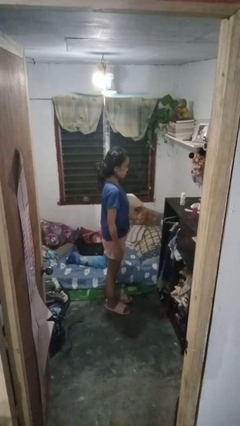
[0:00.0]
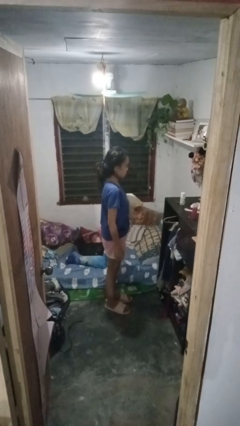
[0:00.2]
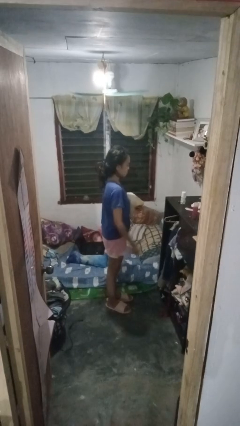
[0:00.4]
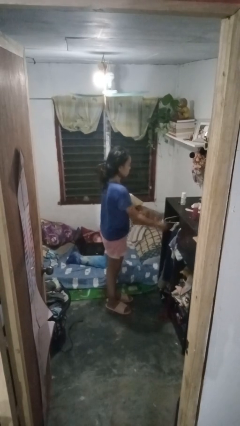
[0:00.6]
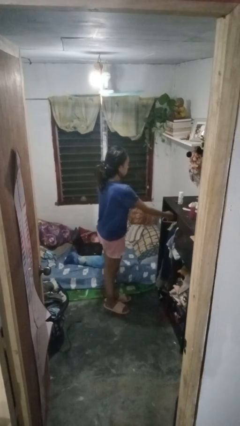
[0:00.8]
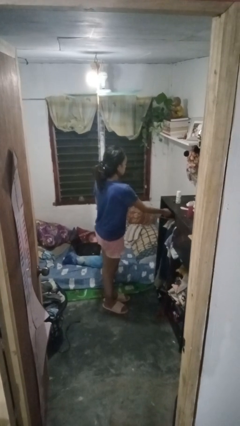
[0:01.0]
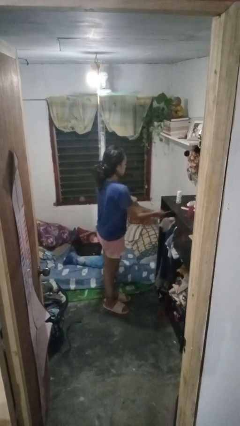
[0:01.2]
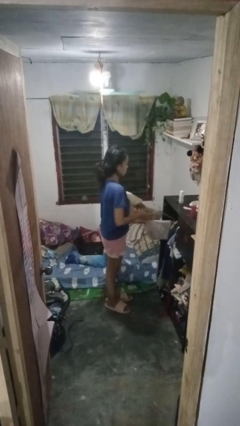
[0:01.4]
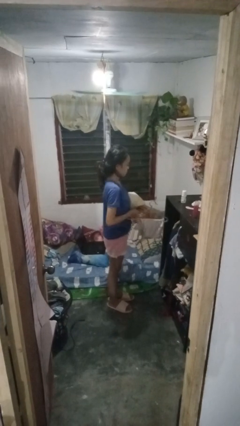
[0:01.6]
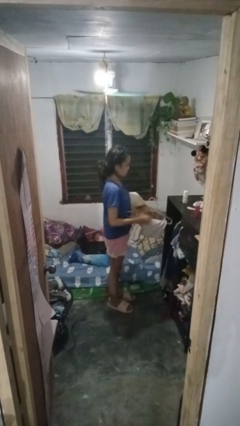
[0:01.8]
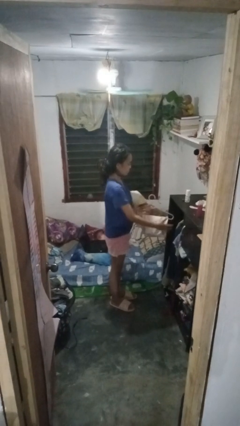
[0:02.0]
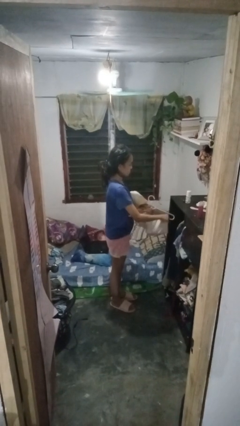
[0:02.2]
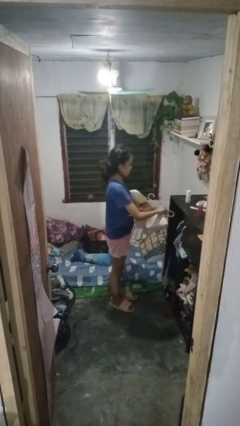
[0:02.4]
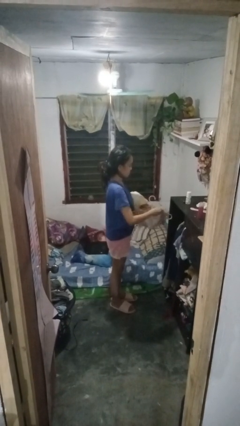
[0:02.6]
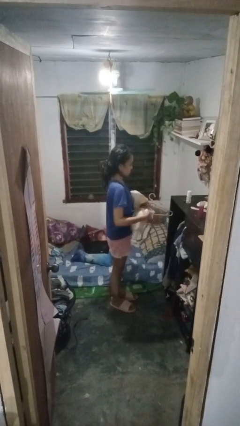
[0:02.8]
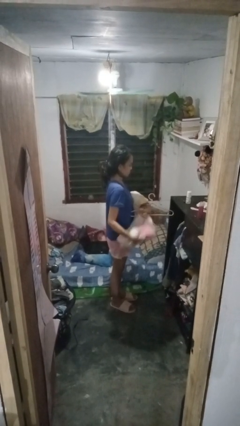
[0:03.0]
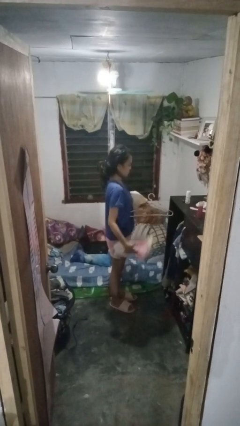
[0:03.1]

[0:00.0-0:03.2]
person takes clothes from closet

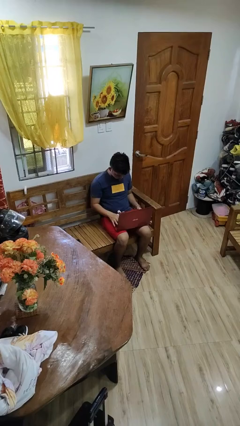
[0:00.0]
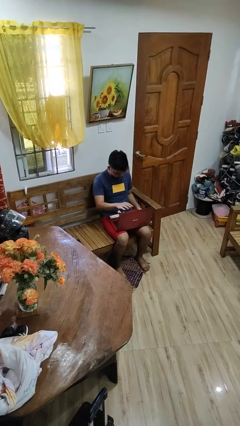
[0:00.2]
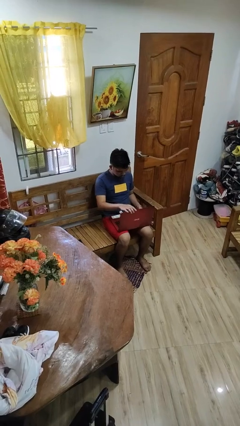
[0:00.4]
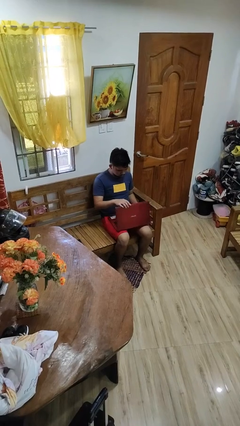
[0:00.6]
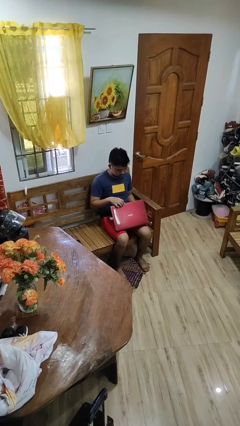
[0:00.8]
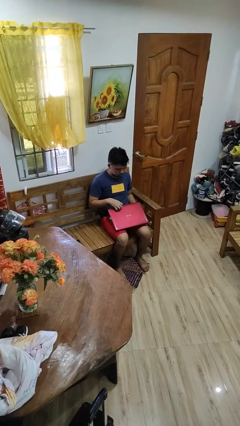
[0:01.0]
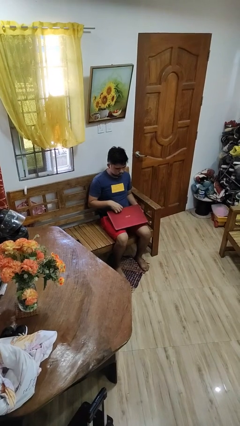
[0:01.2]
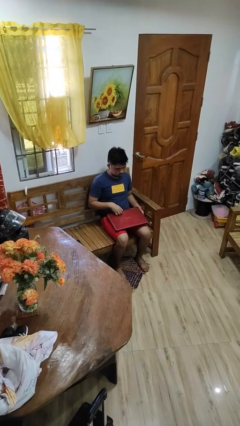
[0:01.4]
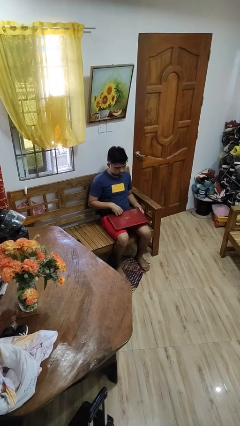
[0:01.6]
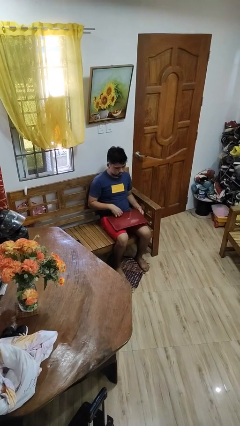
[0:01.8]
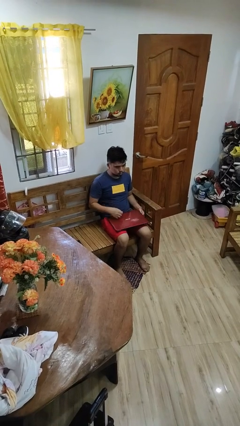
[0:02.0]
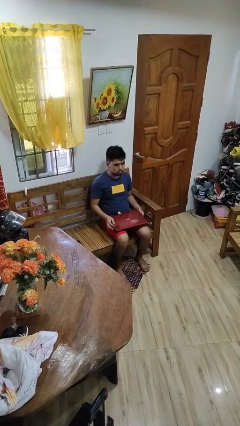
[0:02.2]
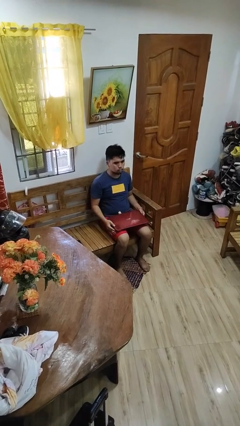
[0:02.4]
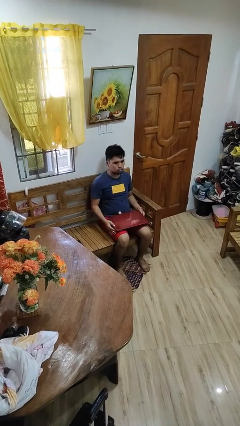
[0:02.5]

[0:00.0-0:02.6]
person closes laptop

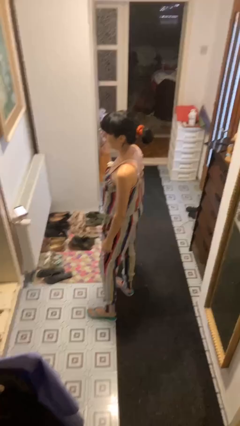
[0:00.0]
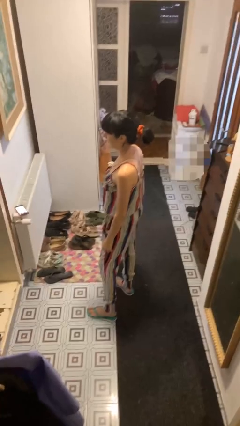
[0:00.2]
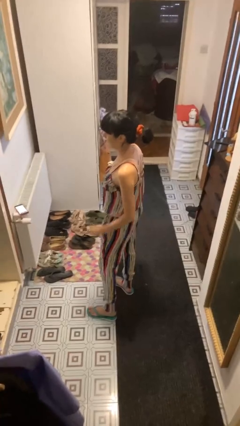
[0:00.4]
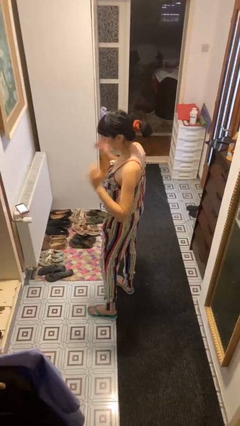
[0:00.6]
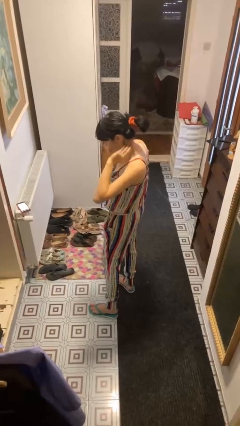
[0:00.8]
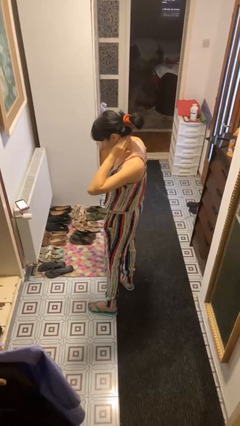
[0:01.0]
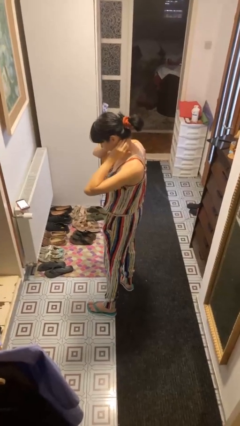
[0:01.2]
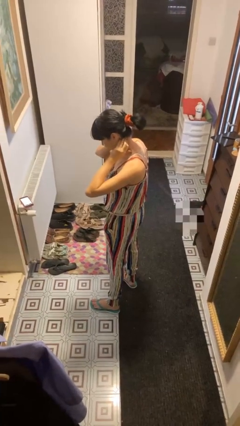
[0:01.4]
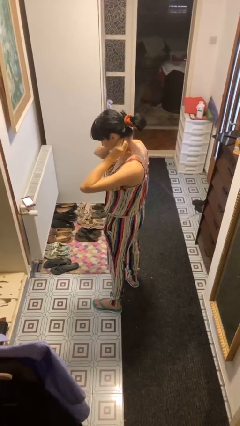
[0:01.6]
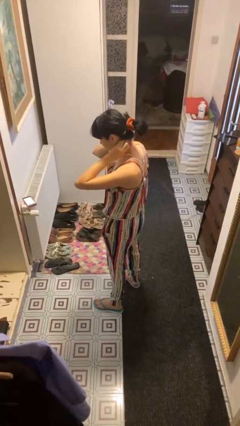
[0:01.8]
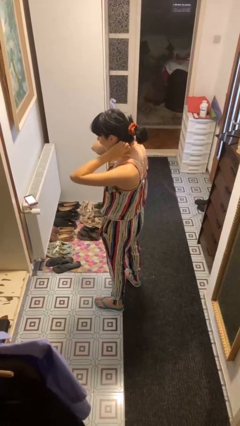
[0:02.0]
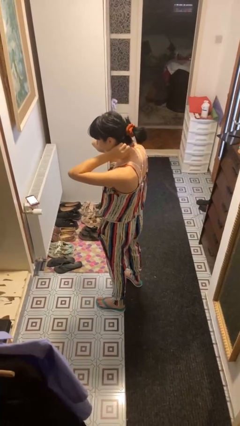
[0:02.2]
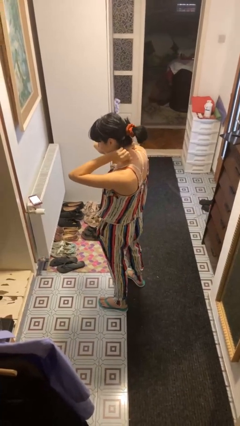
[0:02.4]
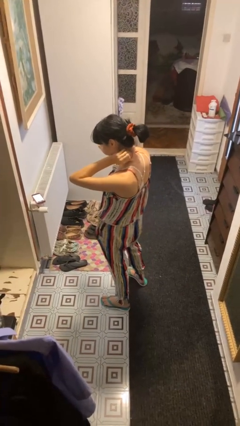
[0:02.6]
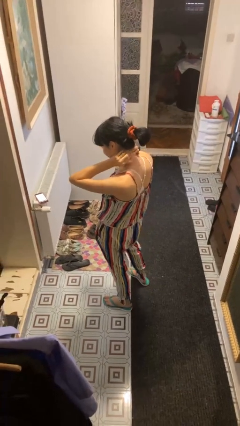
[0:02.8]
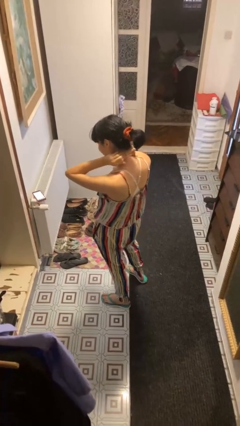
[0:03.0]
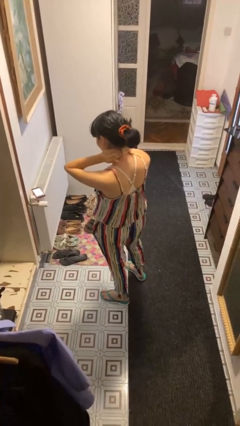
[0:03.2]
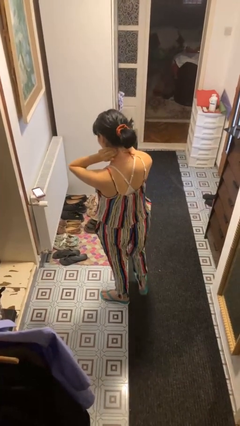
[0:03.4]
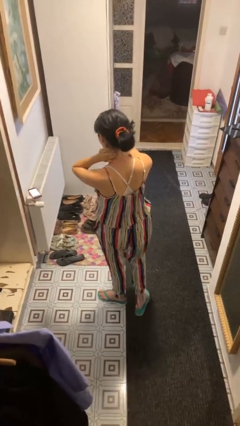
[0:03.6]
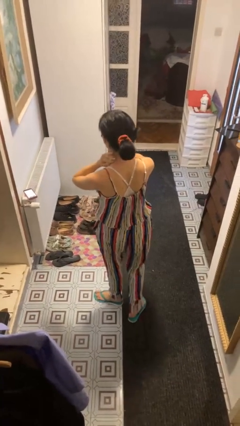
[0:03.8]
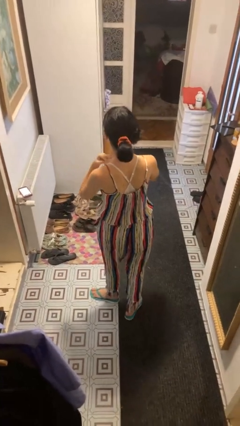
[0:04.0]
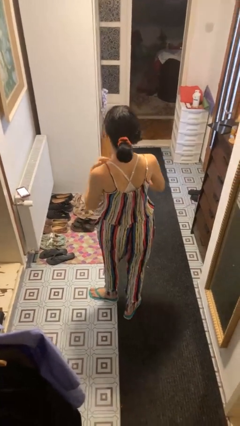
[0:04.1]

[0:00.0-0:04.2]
person rubs neck

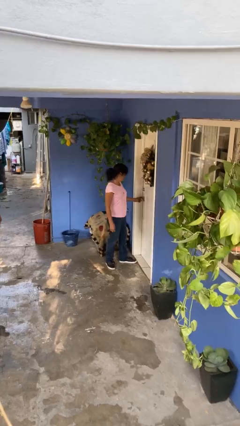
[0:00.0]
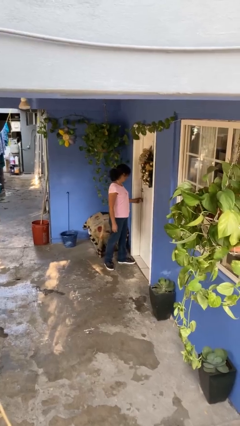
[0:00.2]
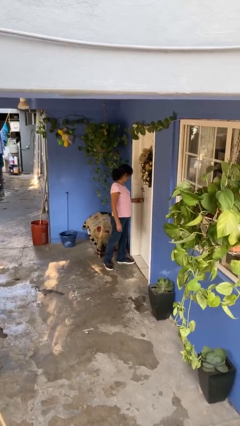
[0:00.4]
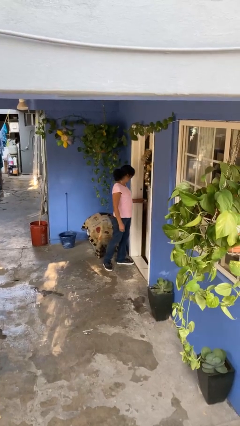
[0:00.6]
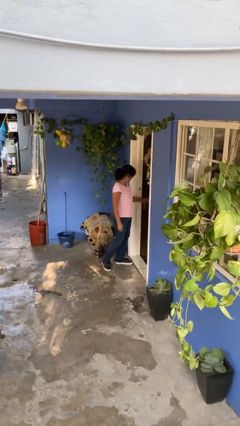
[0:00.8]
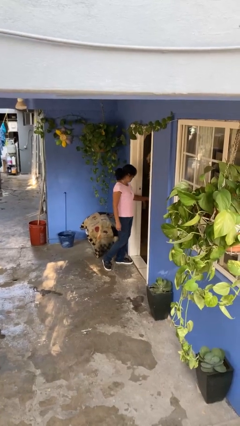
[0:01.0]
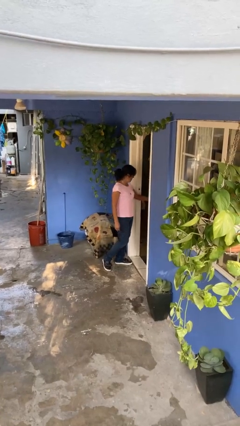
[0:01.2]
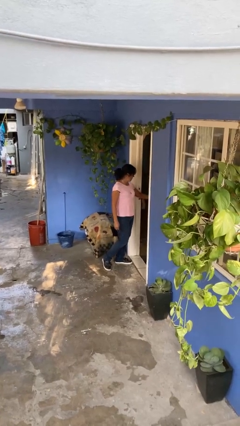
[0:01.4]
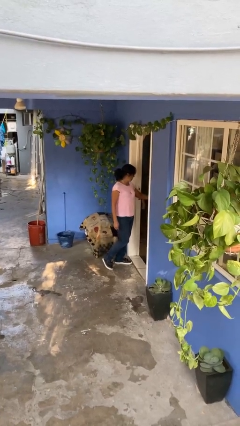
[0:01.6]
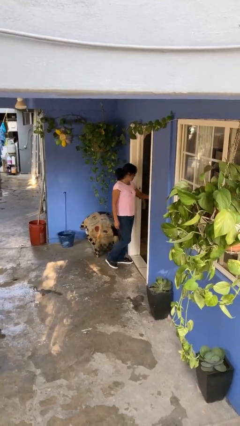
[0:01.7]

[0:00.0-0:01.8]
person opens facility door

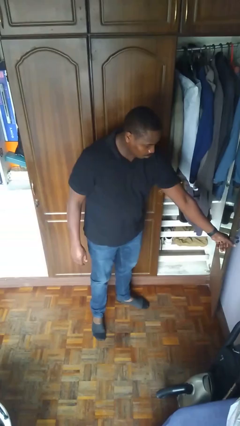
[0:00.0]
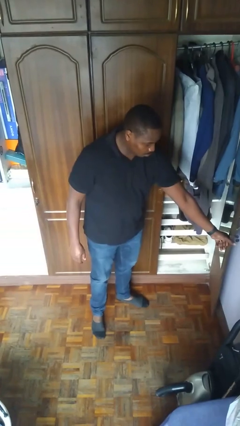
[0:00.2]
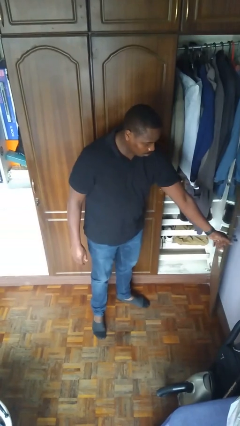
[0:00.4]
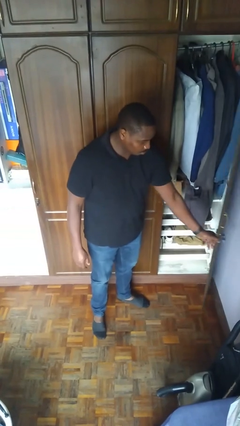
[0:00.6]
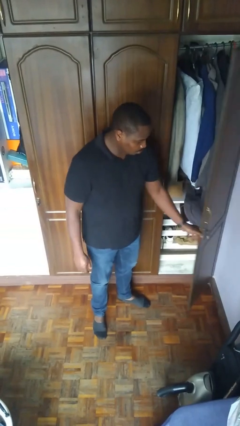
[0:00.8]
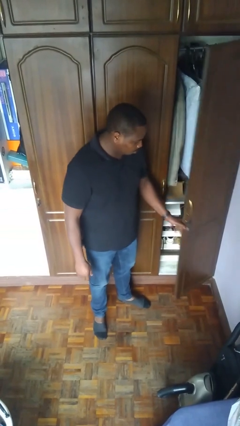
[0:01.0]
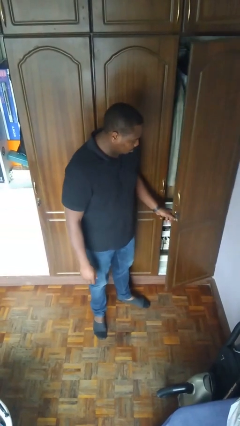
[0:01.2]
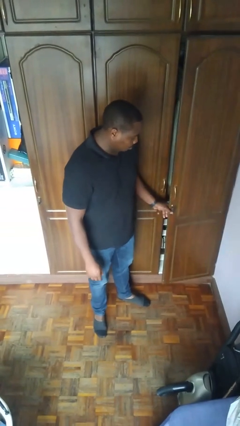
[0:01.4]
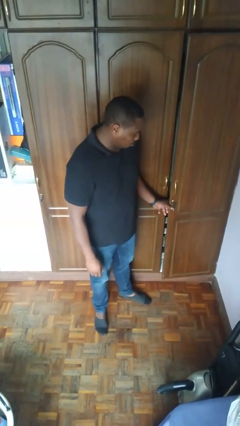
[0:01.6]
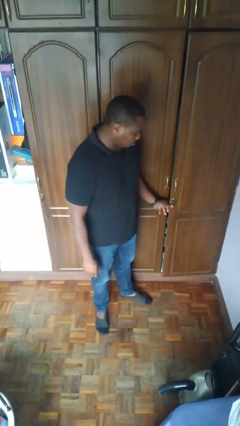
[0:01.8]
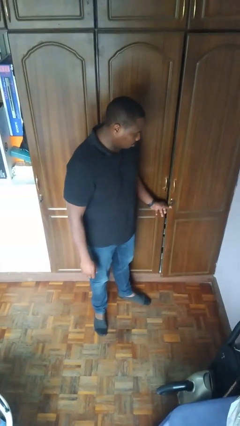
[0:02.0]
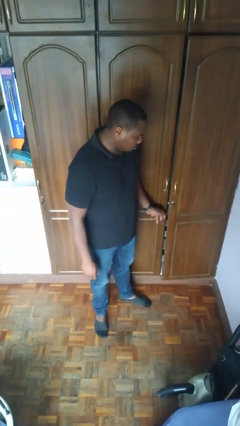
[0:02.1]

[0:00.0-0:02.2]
person closes closet door

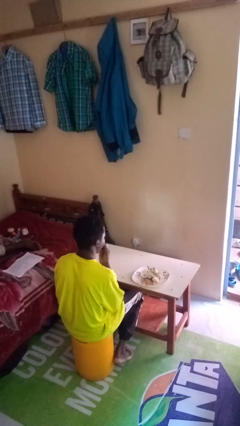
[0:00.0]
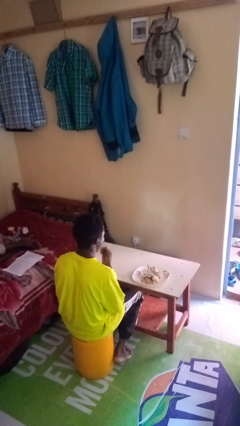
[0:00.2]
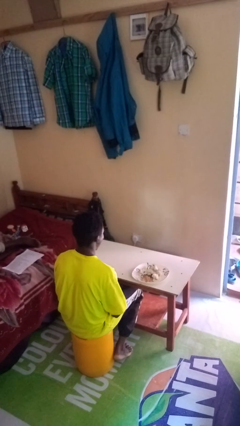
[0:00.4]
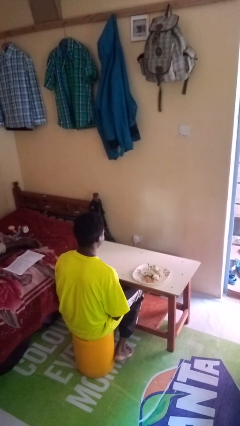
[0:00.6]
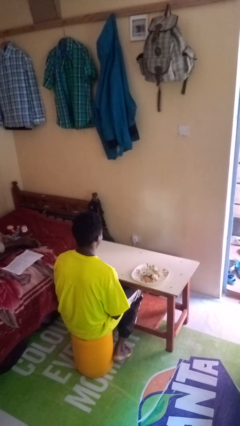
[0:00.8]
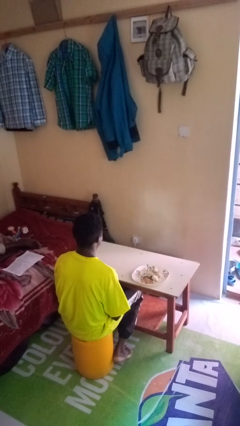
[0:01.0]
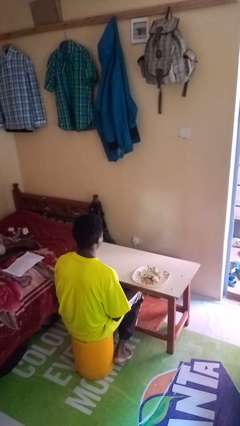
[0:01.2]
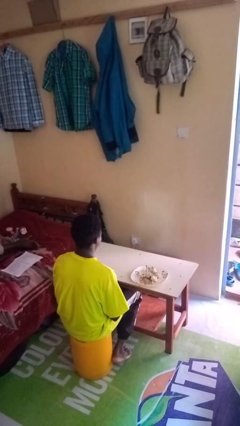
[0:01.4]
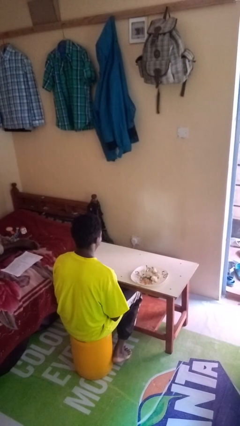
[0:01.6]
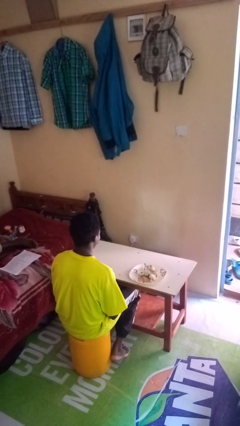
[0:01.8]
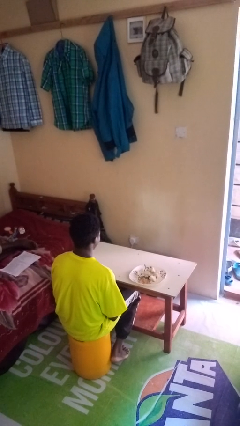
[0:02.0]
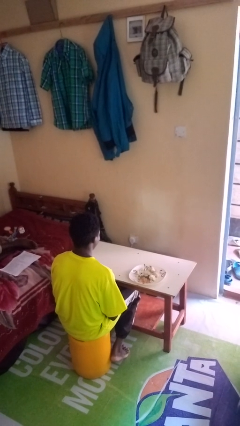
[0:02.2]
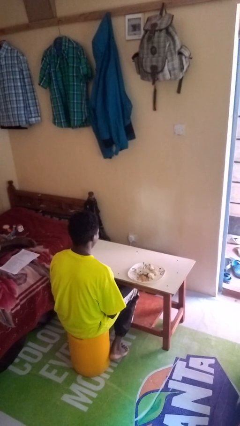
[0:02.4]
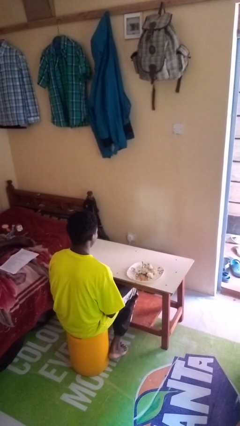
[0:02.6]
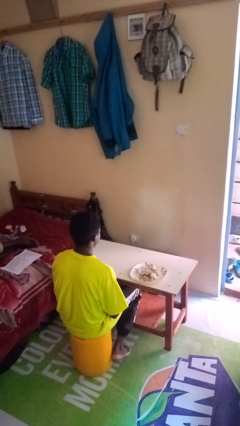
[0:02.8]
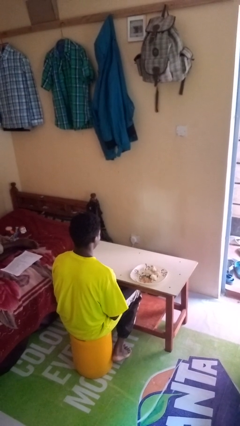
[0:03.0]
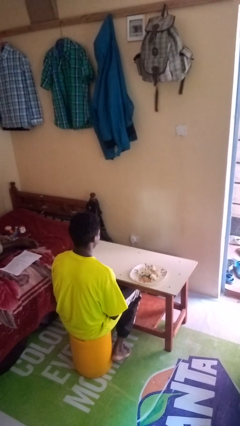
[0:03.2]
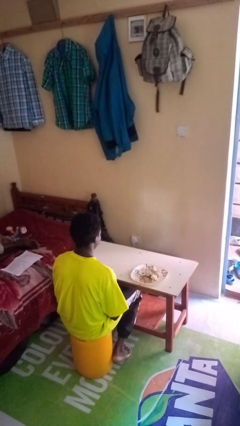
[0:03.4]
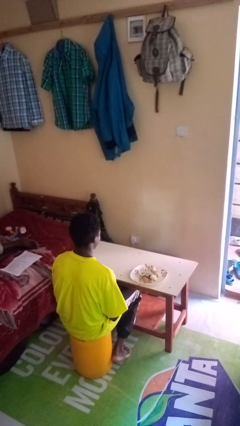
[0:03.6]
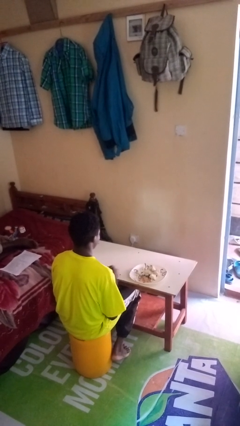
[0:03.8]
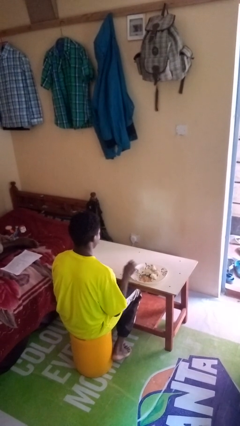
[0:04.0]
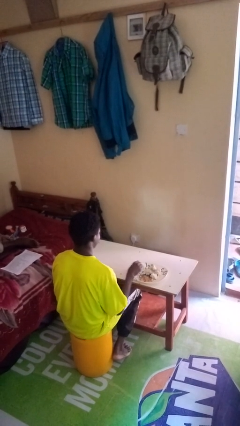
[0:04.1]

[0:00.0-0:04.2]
person eats with hands
